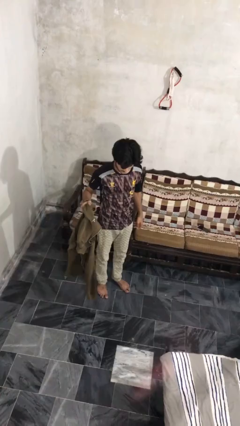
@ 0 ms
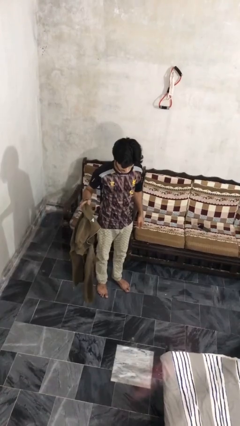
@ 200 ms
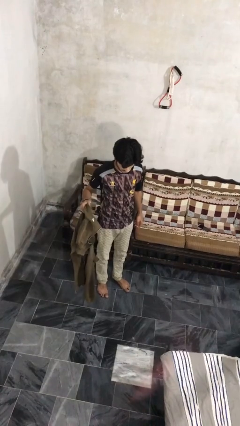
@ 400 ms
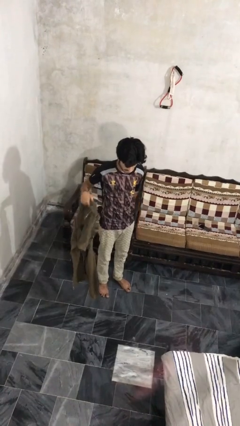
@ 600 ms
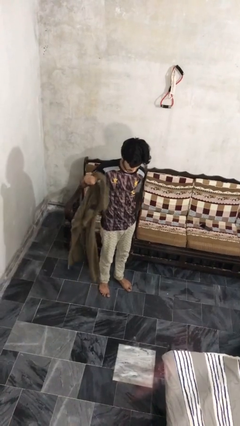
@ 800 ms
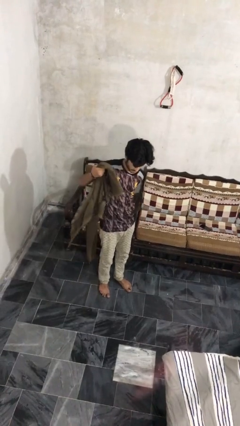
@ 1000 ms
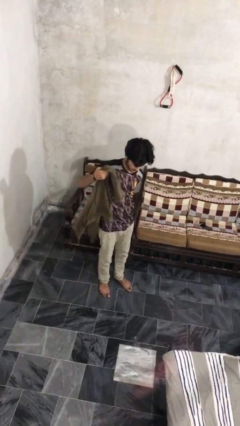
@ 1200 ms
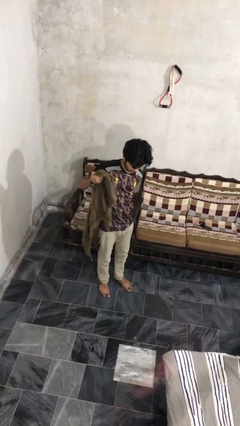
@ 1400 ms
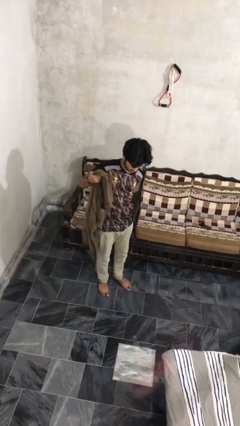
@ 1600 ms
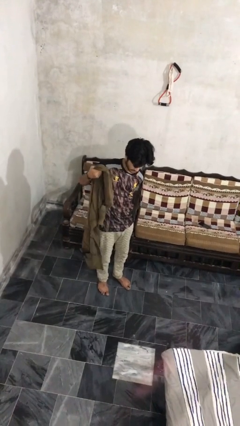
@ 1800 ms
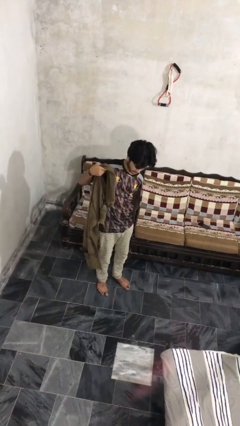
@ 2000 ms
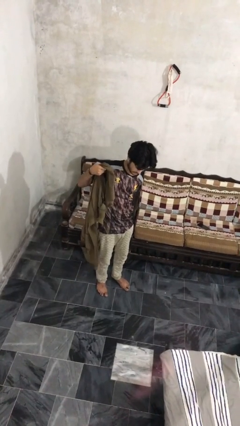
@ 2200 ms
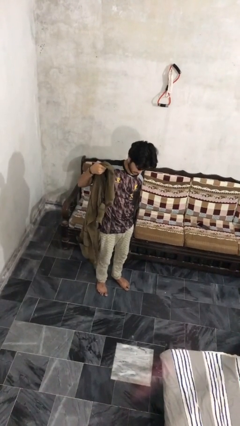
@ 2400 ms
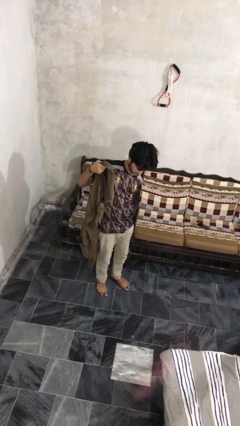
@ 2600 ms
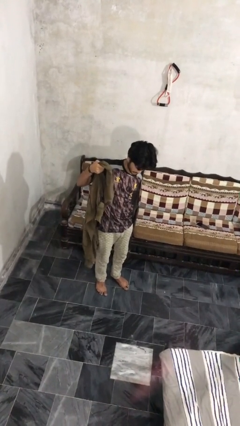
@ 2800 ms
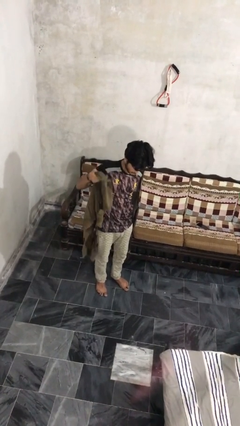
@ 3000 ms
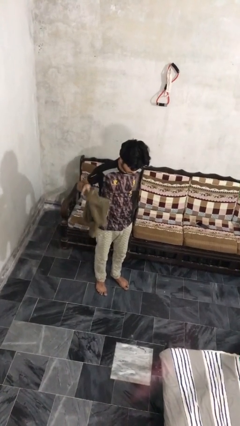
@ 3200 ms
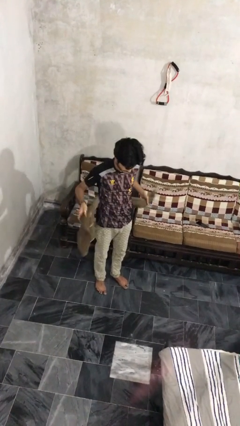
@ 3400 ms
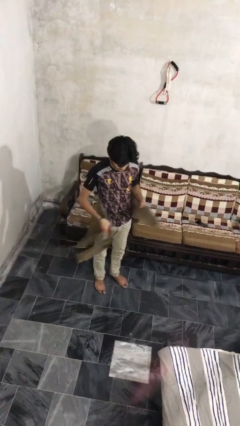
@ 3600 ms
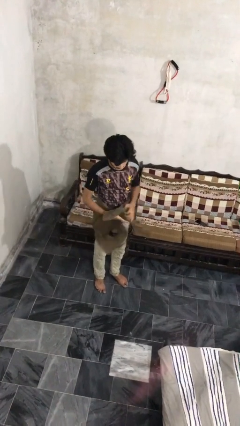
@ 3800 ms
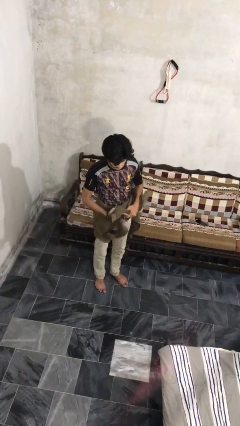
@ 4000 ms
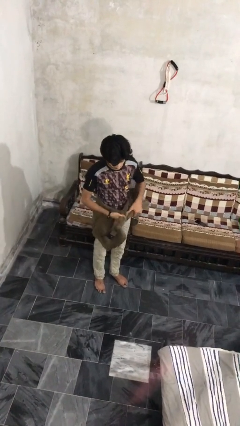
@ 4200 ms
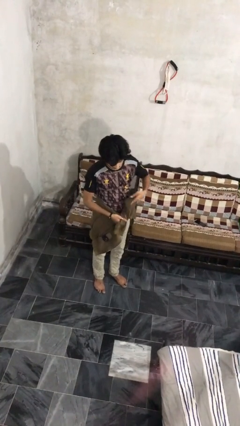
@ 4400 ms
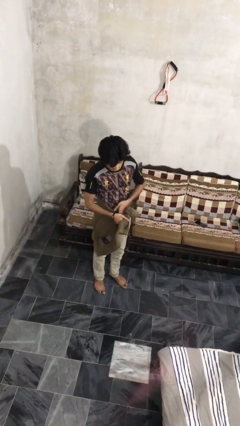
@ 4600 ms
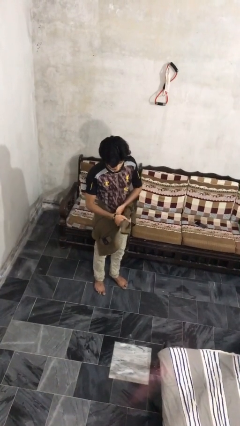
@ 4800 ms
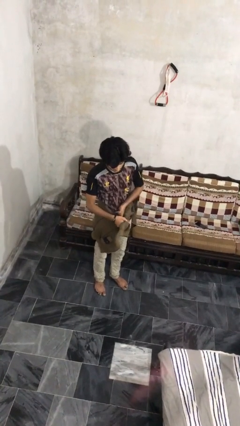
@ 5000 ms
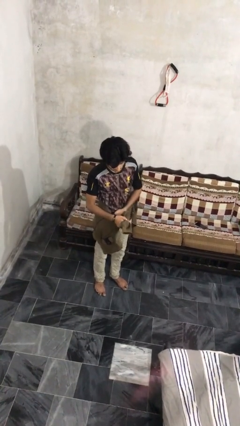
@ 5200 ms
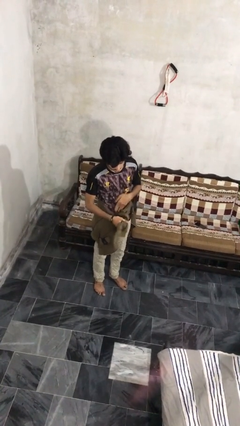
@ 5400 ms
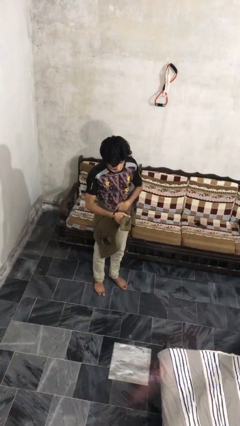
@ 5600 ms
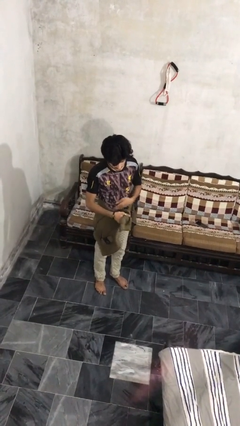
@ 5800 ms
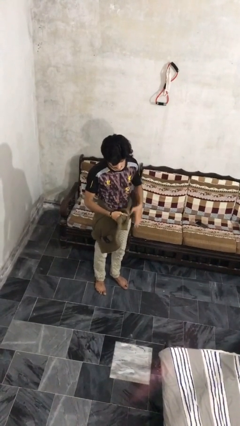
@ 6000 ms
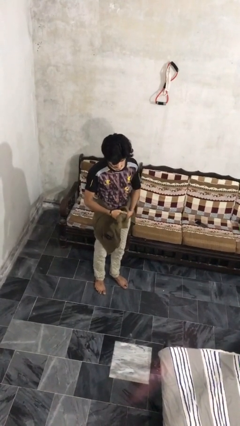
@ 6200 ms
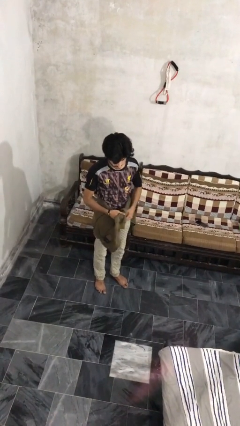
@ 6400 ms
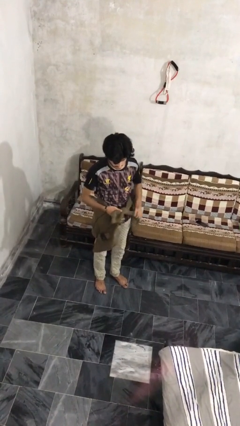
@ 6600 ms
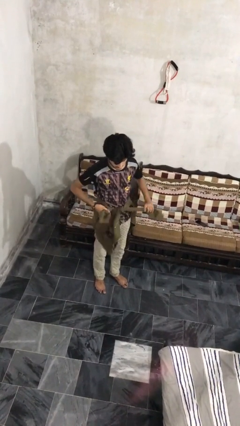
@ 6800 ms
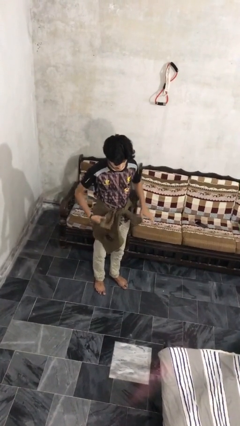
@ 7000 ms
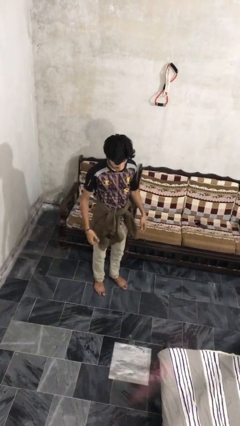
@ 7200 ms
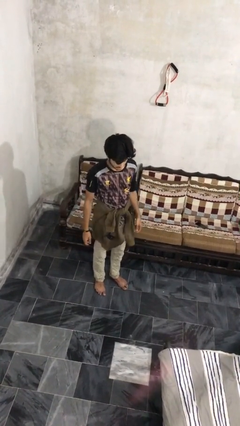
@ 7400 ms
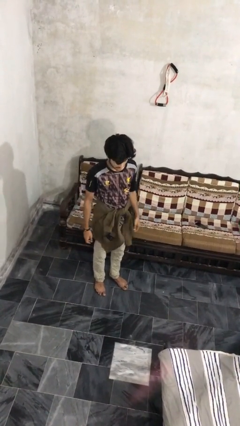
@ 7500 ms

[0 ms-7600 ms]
person ties jacket around waist

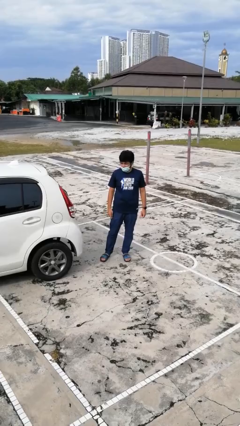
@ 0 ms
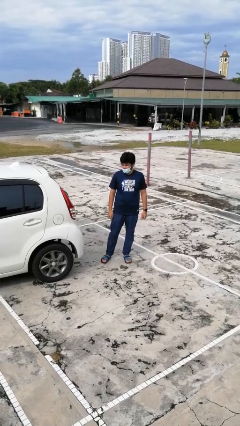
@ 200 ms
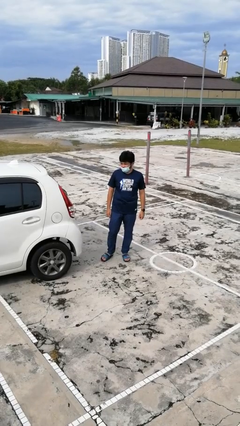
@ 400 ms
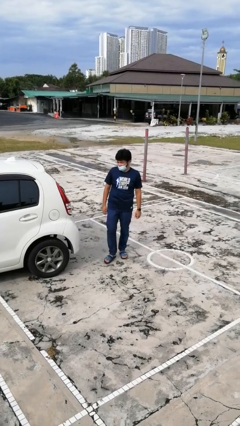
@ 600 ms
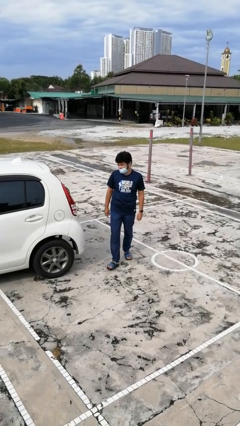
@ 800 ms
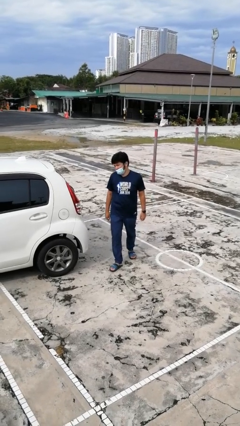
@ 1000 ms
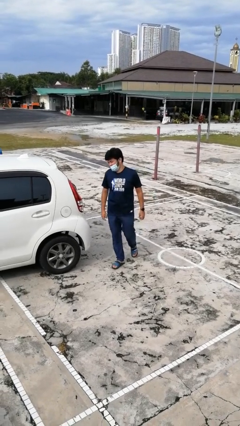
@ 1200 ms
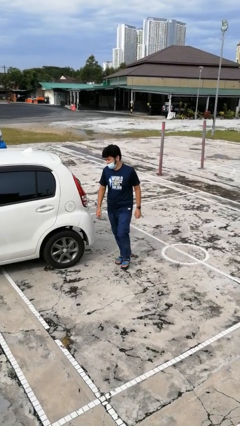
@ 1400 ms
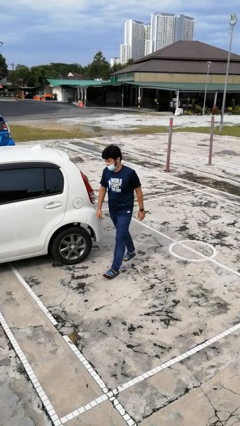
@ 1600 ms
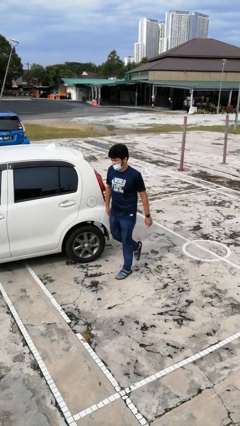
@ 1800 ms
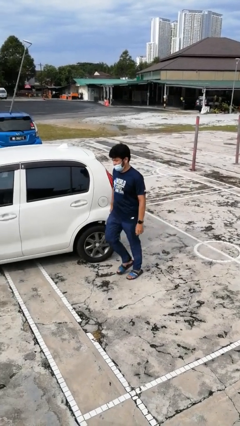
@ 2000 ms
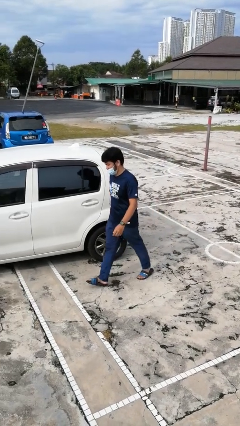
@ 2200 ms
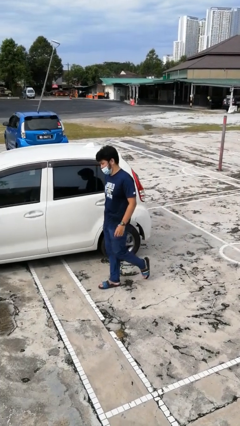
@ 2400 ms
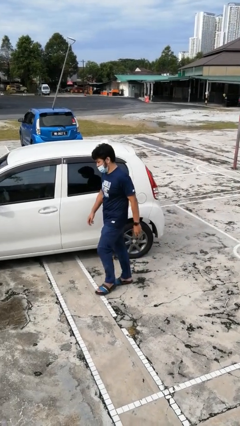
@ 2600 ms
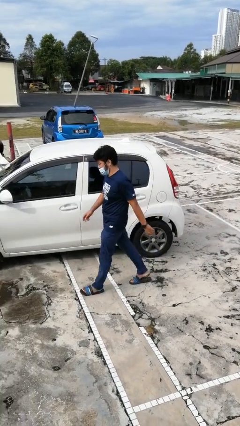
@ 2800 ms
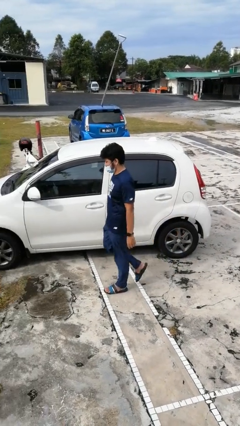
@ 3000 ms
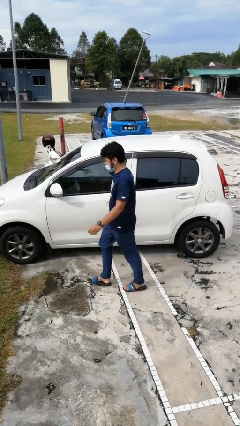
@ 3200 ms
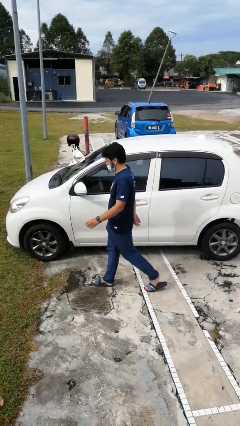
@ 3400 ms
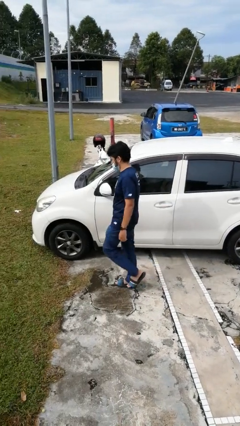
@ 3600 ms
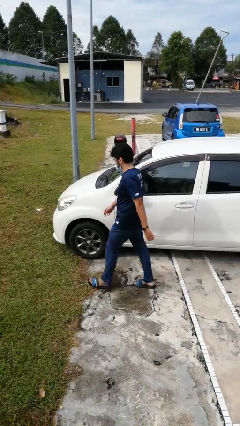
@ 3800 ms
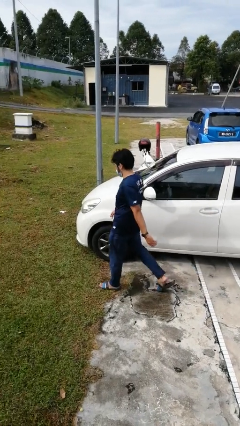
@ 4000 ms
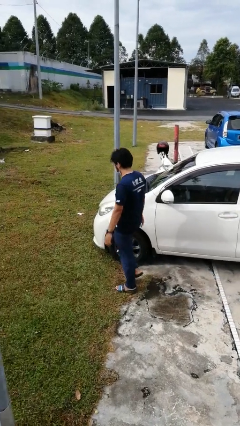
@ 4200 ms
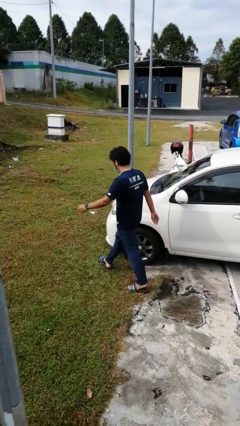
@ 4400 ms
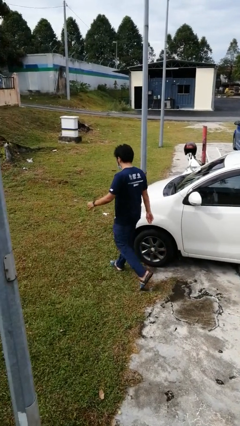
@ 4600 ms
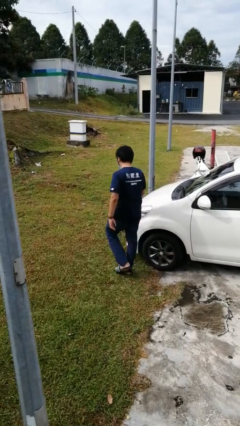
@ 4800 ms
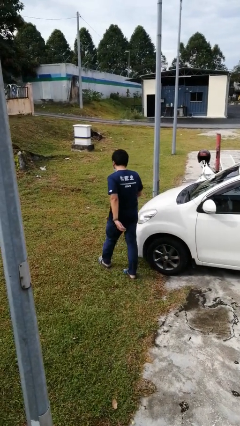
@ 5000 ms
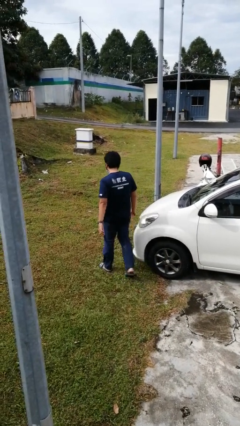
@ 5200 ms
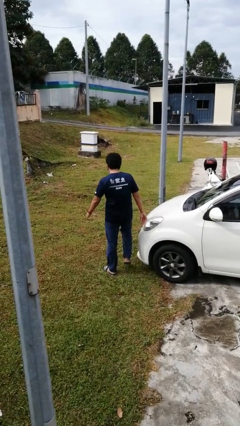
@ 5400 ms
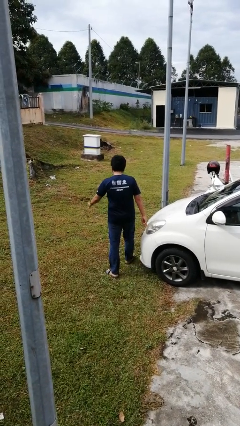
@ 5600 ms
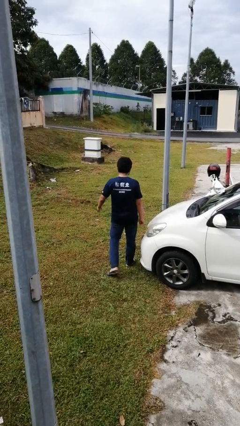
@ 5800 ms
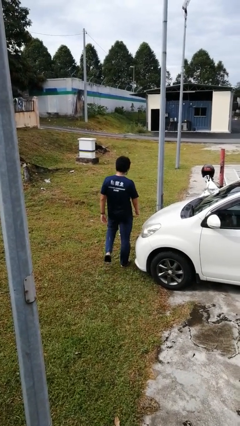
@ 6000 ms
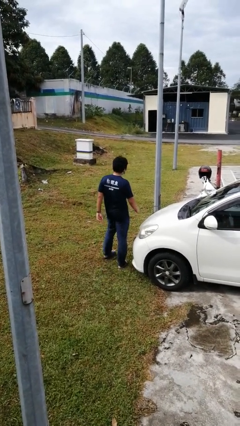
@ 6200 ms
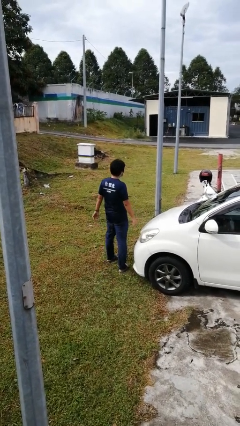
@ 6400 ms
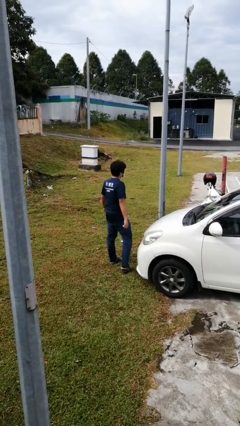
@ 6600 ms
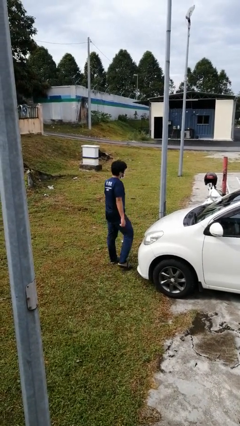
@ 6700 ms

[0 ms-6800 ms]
person walks around car

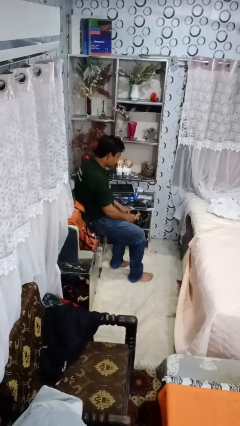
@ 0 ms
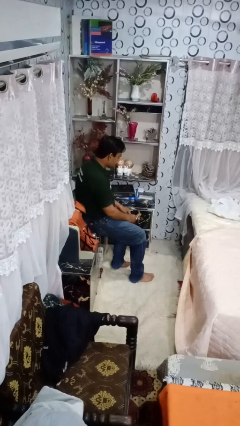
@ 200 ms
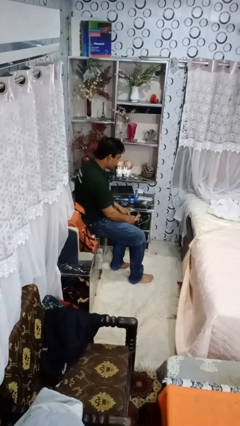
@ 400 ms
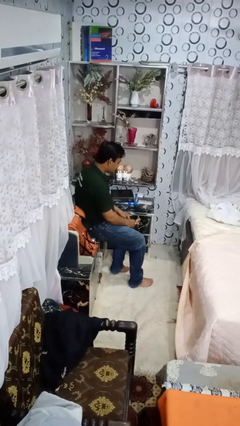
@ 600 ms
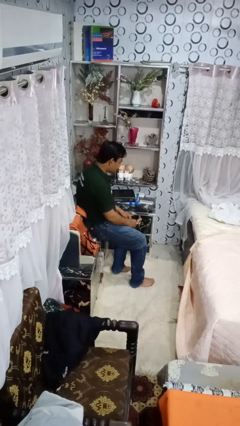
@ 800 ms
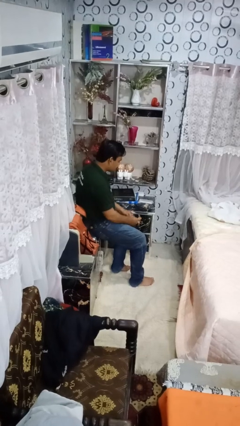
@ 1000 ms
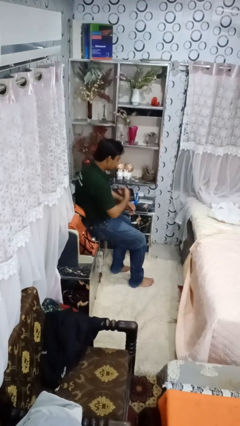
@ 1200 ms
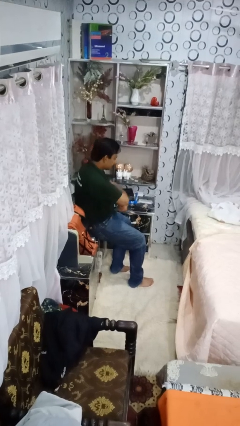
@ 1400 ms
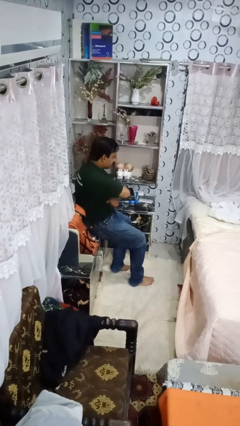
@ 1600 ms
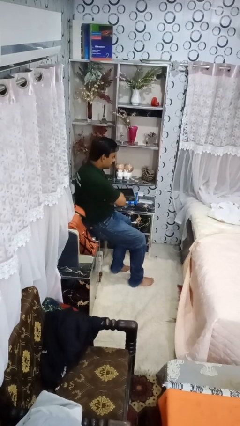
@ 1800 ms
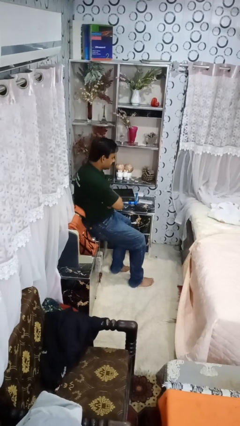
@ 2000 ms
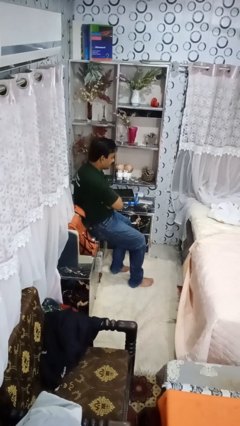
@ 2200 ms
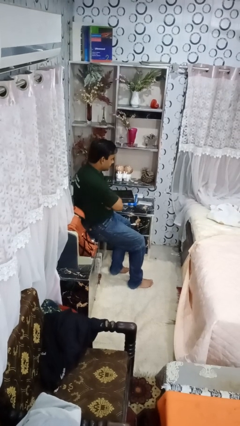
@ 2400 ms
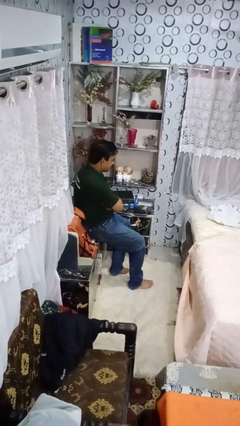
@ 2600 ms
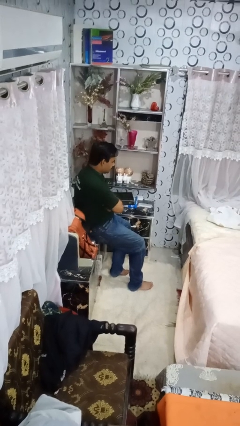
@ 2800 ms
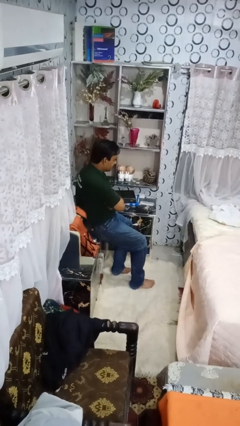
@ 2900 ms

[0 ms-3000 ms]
person crosses arms

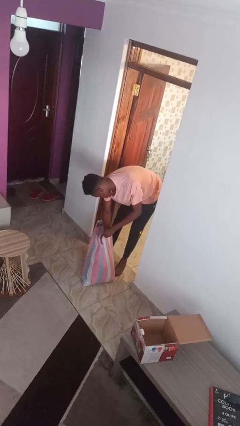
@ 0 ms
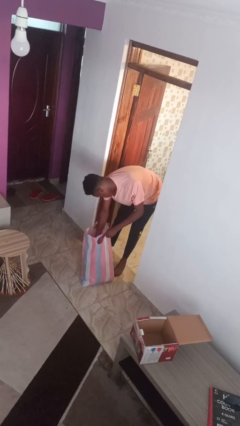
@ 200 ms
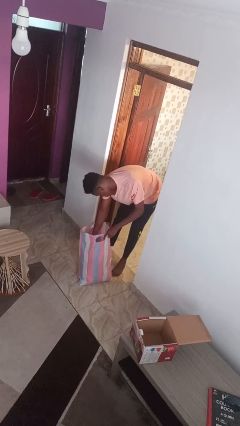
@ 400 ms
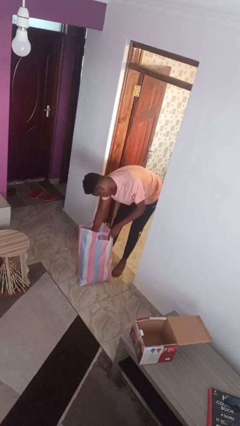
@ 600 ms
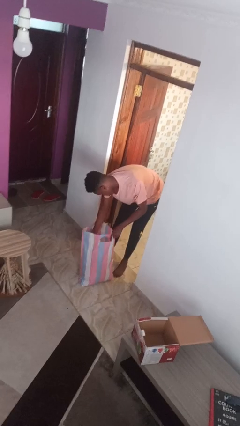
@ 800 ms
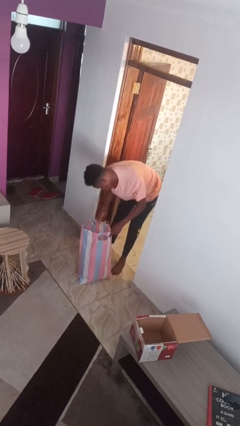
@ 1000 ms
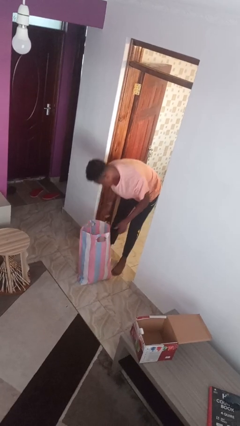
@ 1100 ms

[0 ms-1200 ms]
person searches in bag
